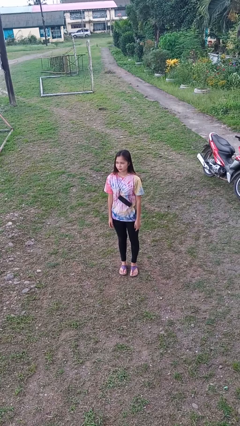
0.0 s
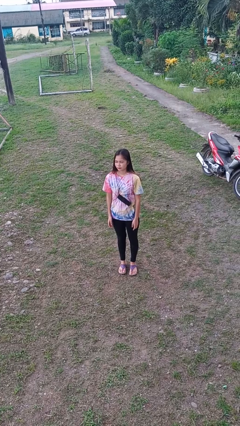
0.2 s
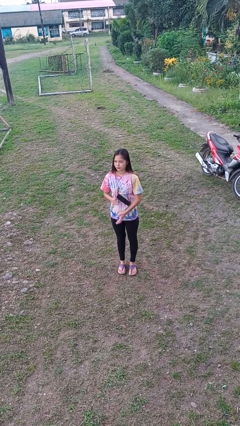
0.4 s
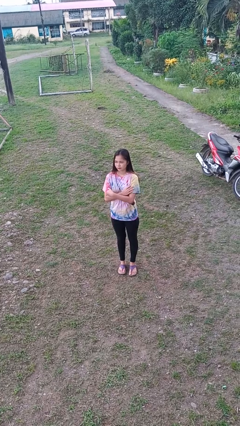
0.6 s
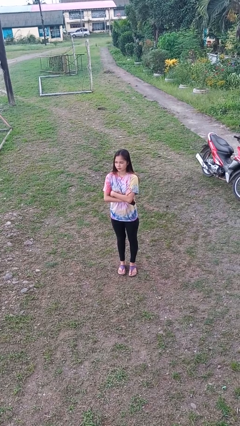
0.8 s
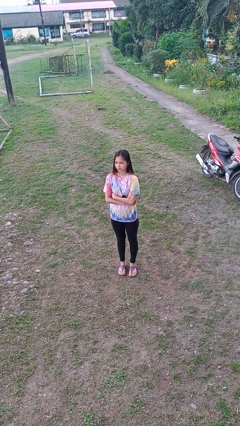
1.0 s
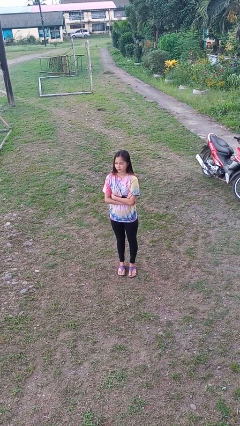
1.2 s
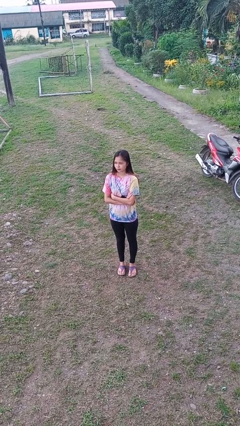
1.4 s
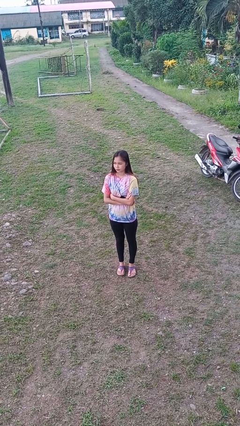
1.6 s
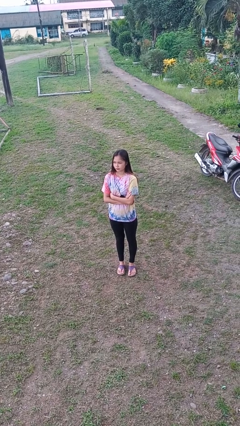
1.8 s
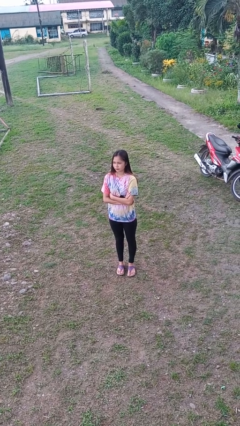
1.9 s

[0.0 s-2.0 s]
person crosses arms

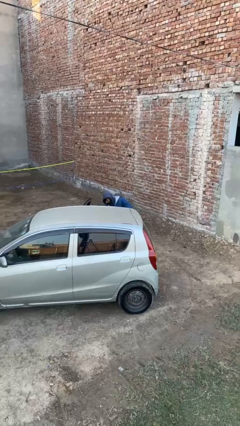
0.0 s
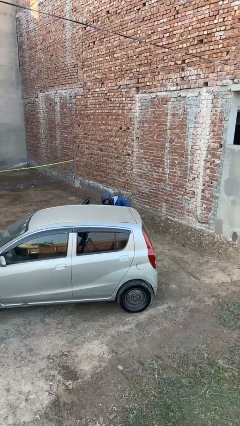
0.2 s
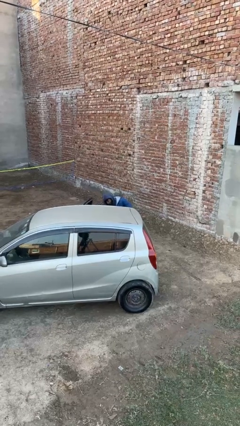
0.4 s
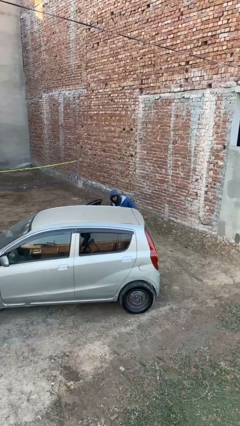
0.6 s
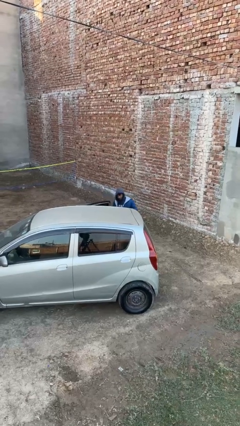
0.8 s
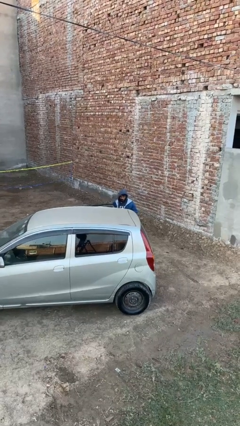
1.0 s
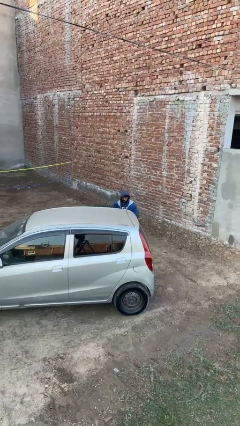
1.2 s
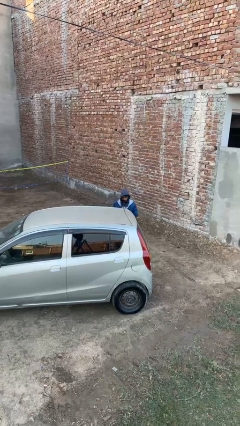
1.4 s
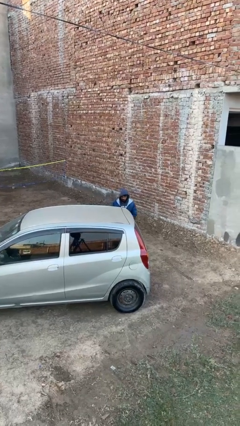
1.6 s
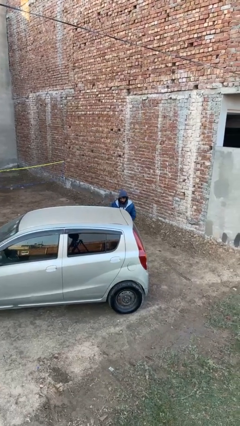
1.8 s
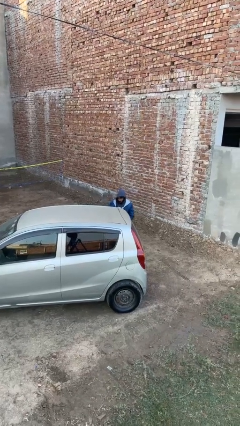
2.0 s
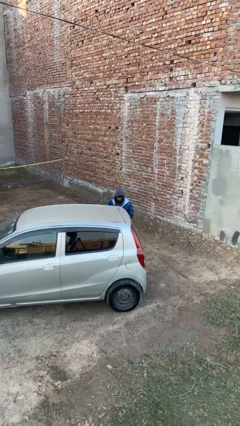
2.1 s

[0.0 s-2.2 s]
person closes car door

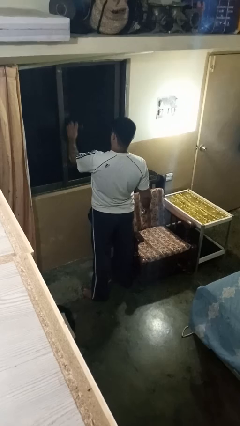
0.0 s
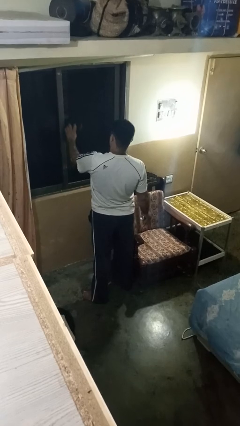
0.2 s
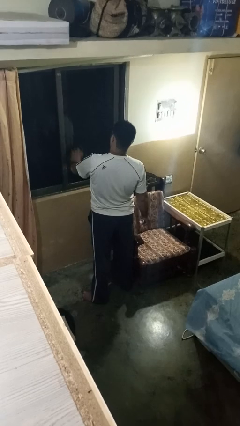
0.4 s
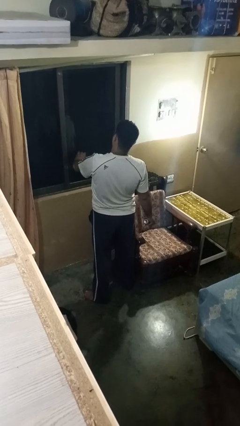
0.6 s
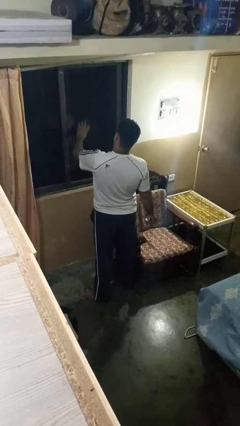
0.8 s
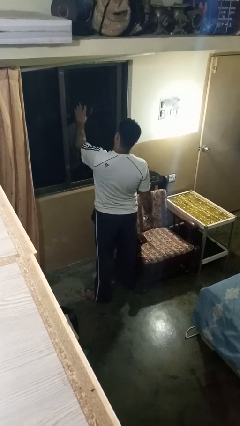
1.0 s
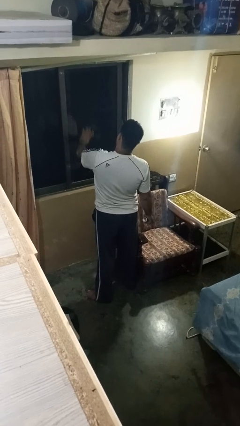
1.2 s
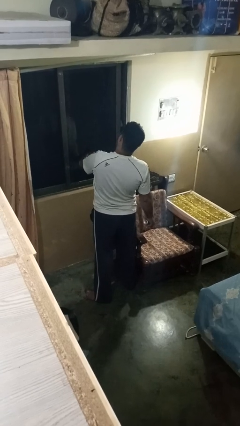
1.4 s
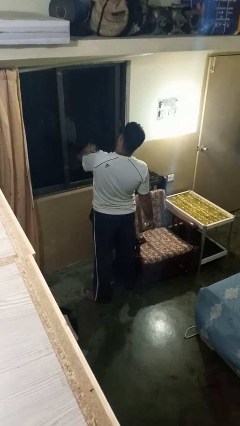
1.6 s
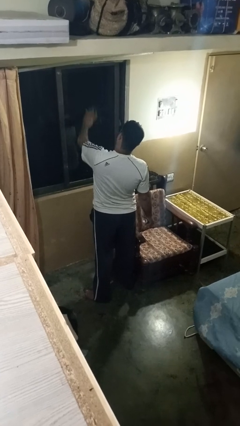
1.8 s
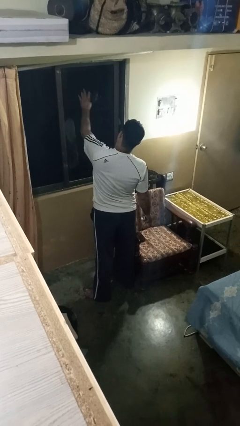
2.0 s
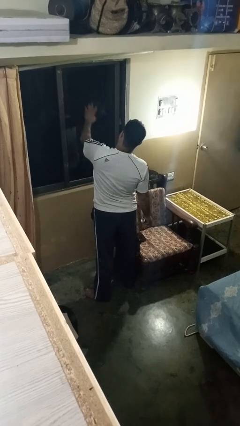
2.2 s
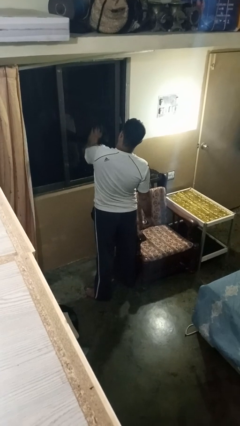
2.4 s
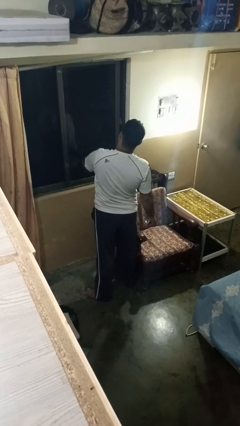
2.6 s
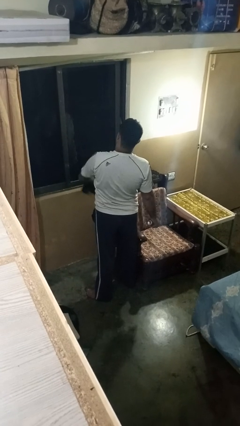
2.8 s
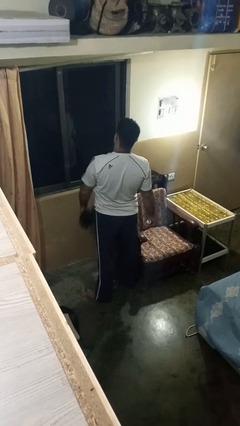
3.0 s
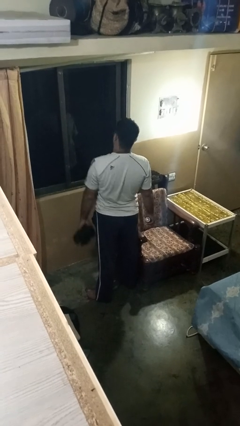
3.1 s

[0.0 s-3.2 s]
person washes window

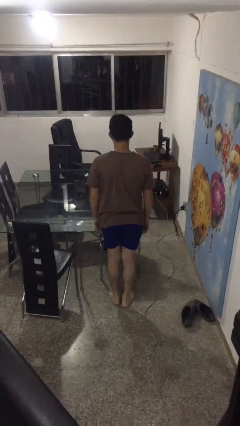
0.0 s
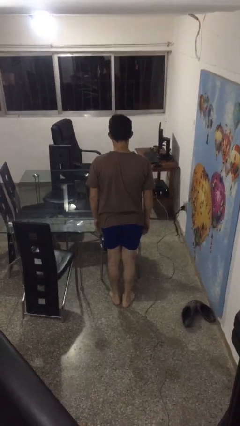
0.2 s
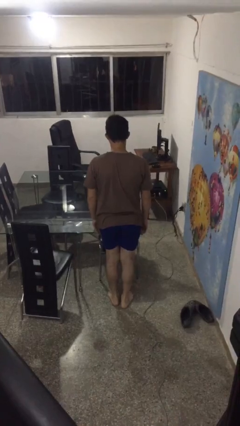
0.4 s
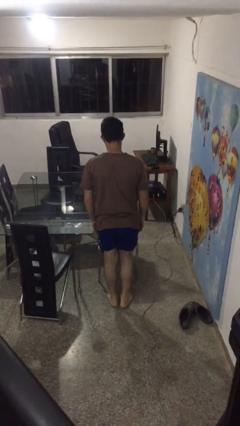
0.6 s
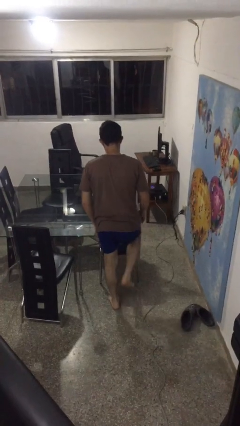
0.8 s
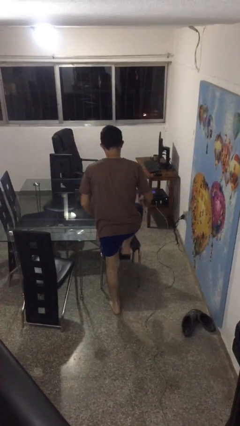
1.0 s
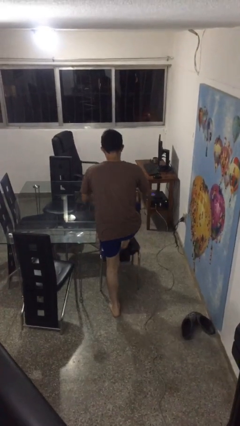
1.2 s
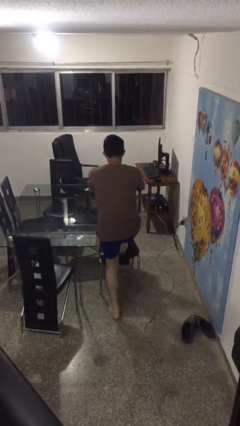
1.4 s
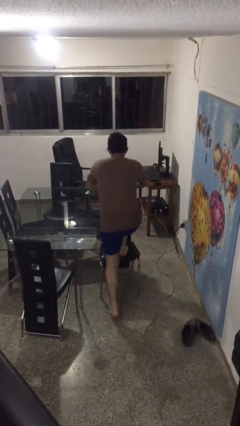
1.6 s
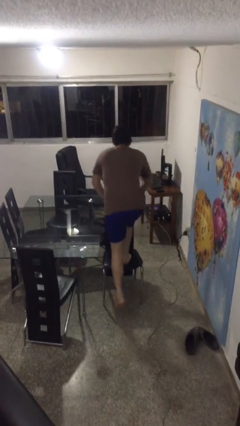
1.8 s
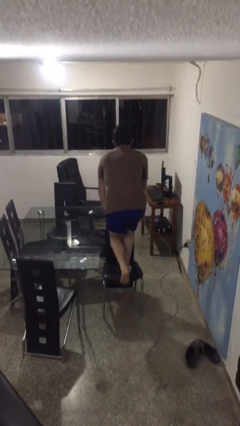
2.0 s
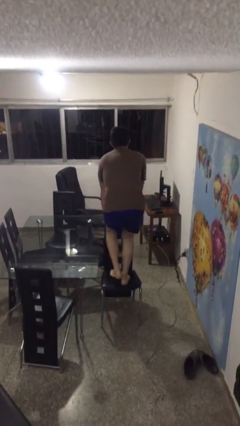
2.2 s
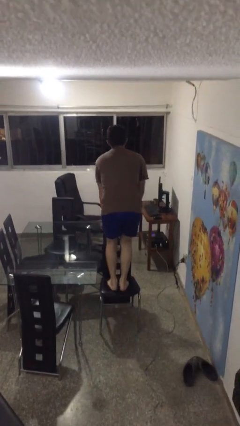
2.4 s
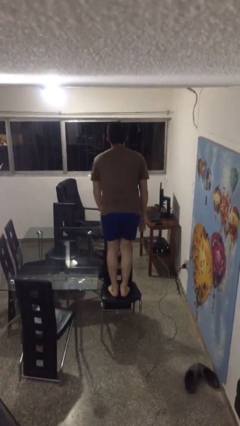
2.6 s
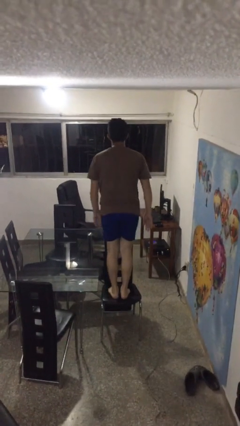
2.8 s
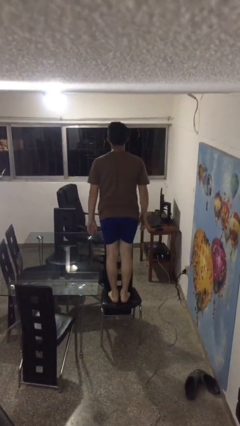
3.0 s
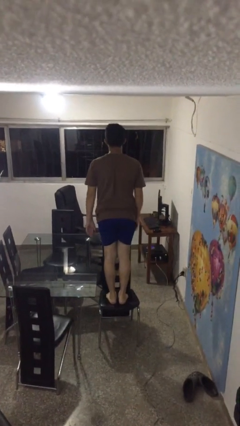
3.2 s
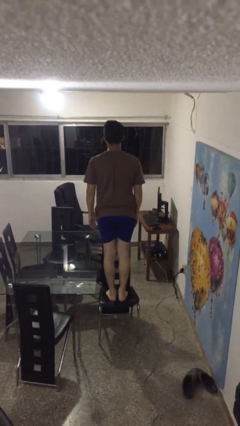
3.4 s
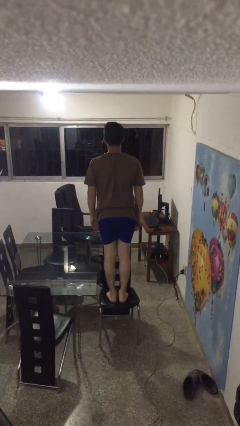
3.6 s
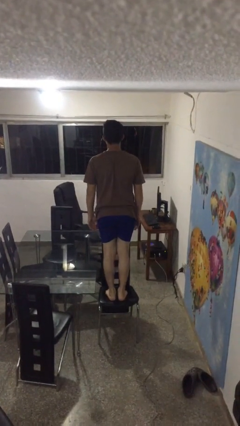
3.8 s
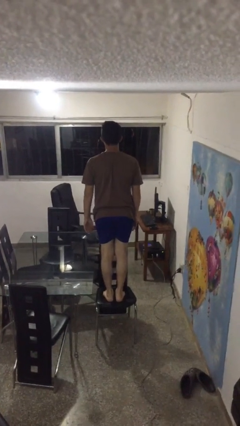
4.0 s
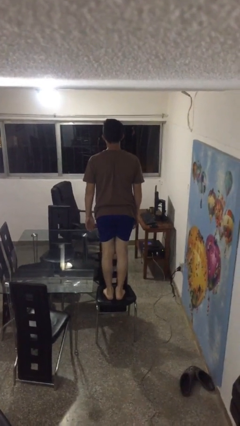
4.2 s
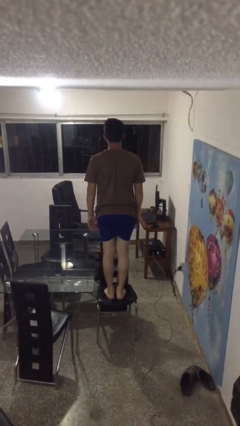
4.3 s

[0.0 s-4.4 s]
person climbs on chair

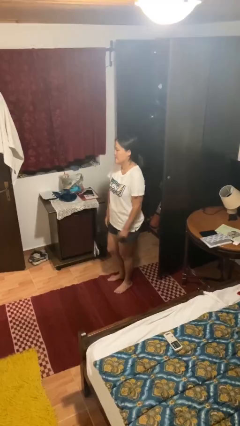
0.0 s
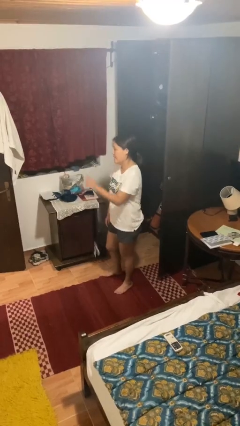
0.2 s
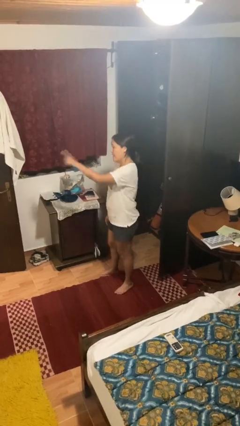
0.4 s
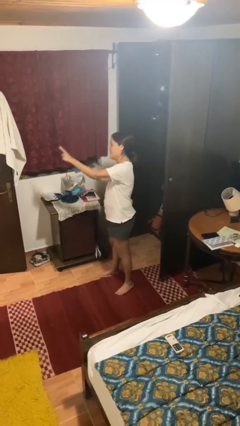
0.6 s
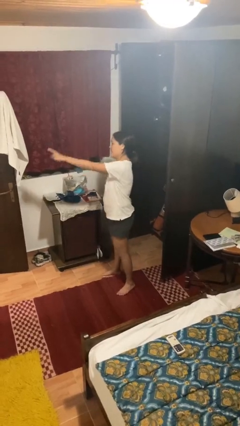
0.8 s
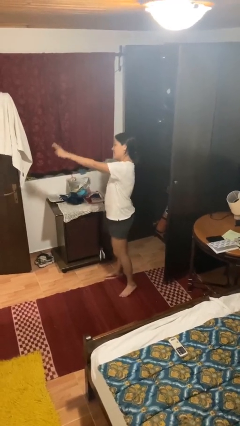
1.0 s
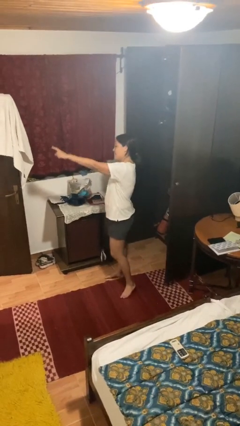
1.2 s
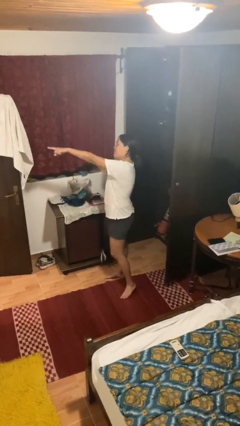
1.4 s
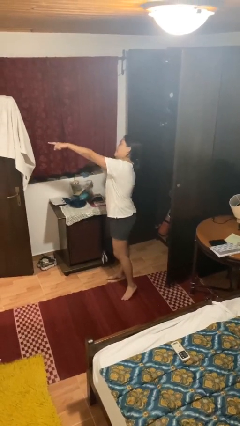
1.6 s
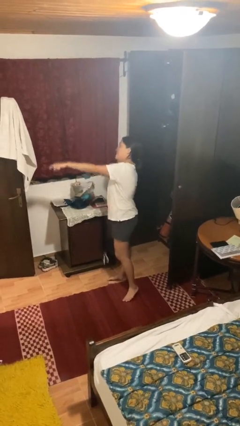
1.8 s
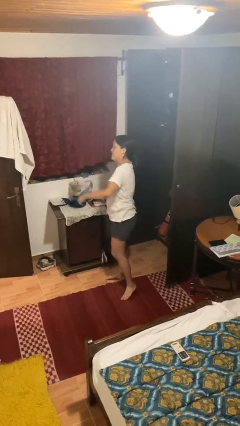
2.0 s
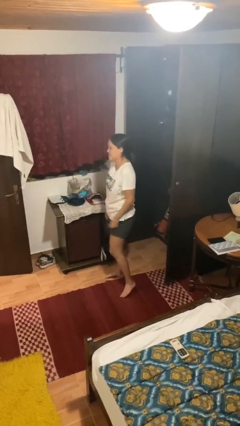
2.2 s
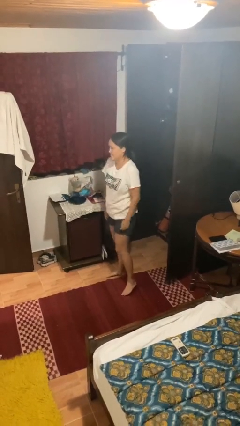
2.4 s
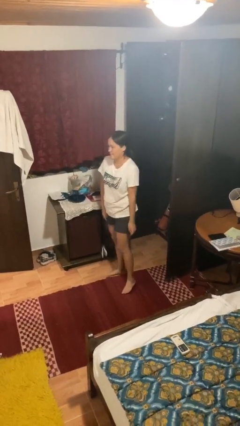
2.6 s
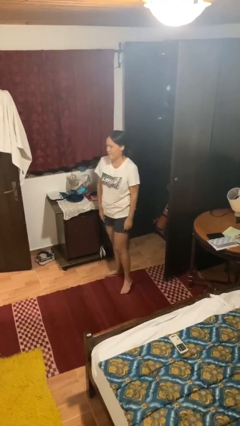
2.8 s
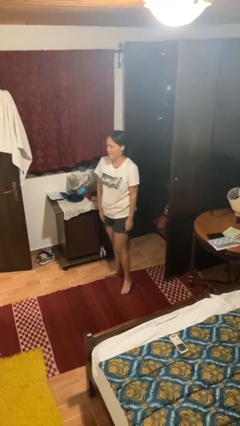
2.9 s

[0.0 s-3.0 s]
person points at person

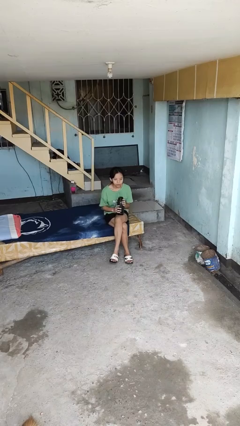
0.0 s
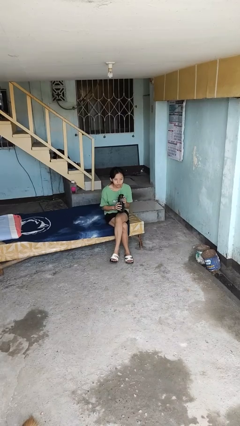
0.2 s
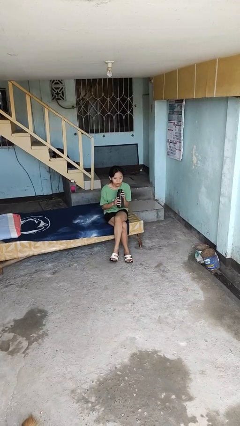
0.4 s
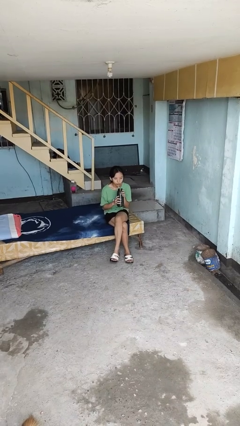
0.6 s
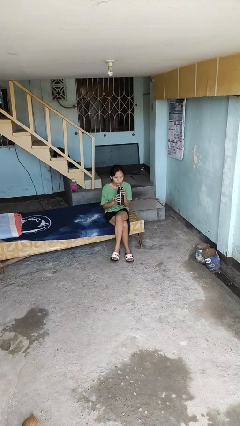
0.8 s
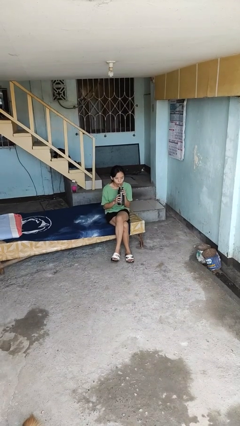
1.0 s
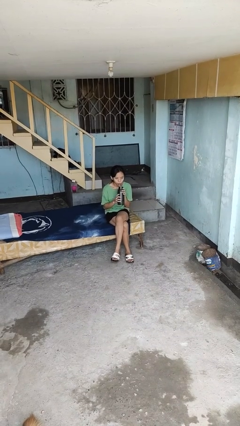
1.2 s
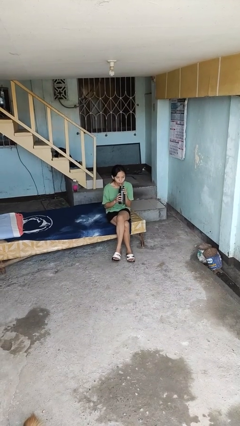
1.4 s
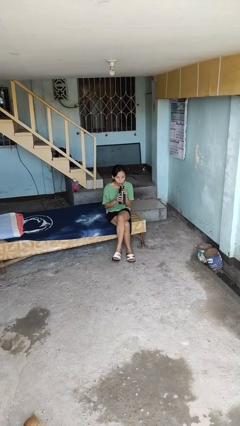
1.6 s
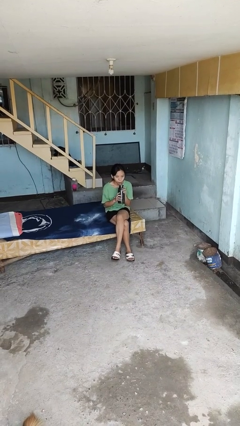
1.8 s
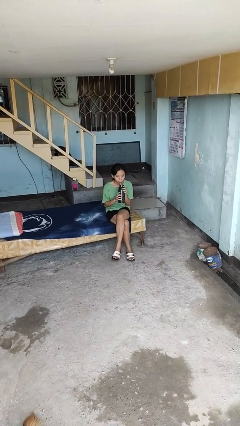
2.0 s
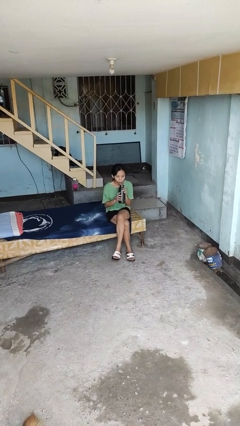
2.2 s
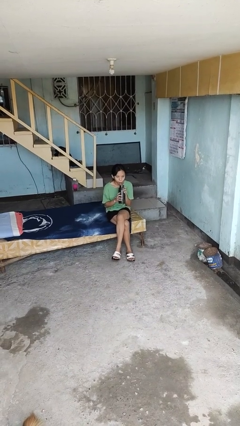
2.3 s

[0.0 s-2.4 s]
person drinks from straw

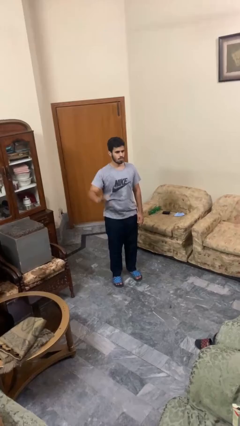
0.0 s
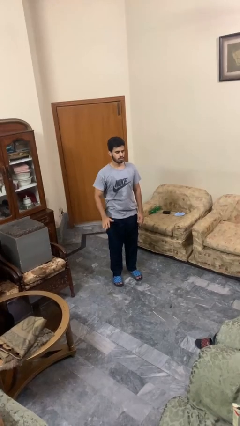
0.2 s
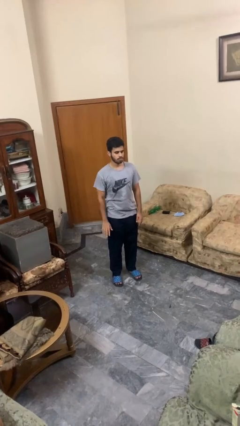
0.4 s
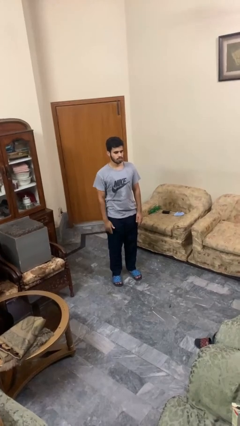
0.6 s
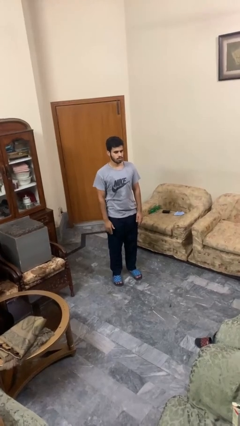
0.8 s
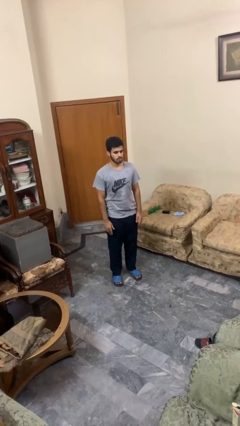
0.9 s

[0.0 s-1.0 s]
person gestures lower hand
